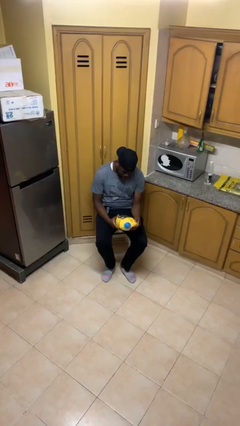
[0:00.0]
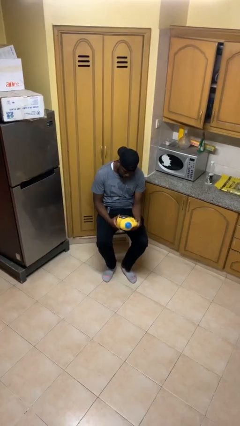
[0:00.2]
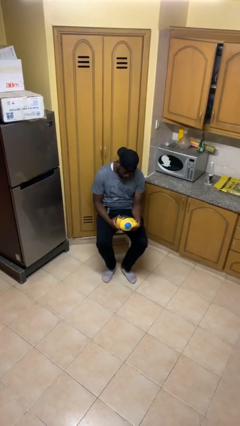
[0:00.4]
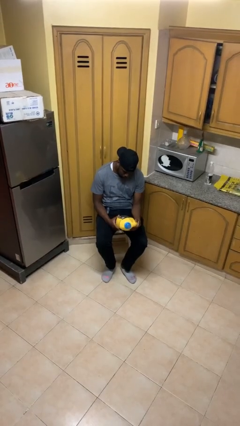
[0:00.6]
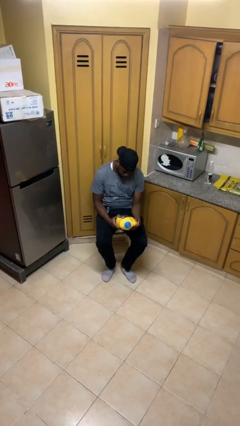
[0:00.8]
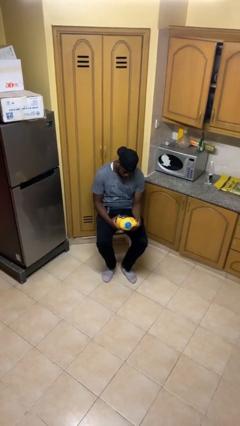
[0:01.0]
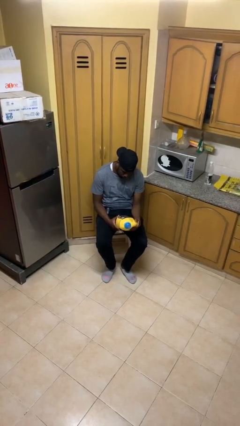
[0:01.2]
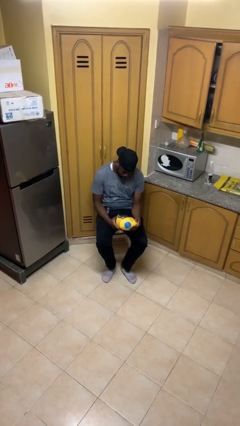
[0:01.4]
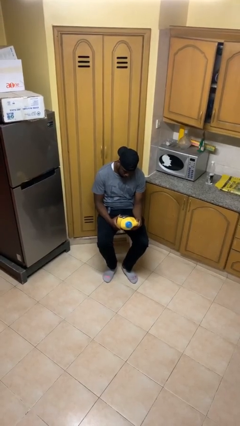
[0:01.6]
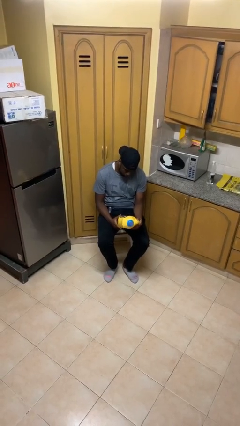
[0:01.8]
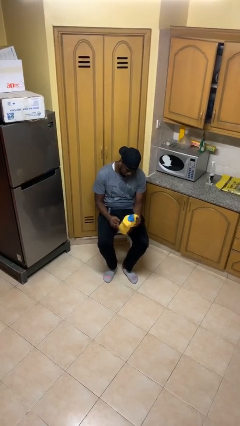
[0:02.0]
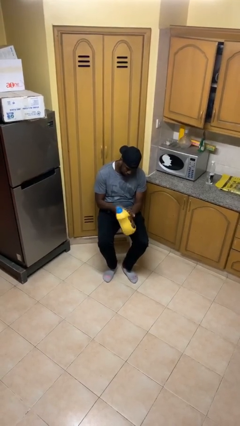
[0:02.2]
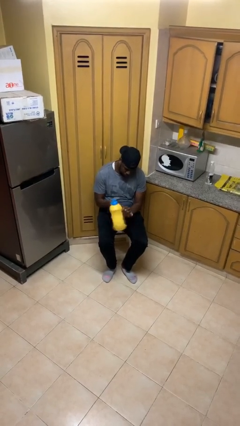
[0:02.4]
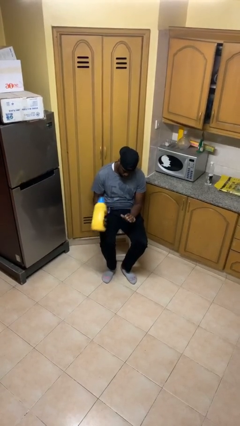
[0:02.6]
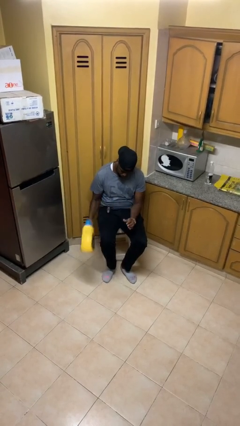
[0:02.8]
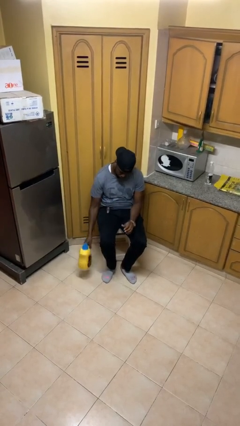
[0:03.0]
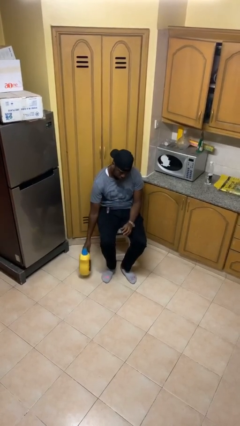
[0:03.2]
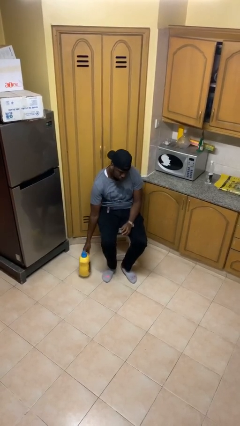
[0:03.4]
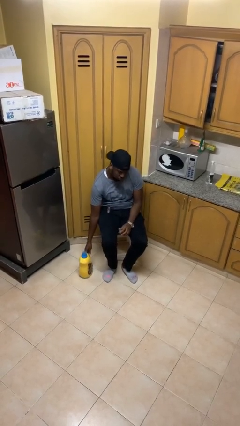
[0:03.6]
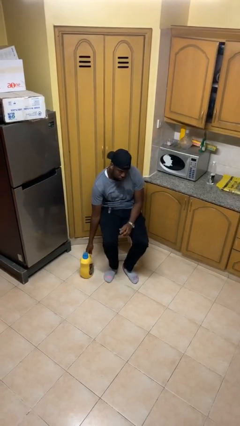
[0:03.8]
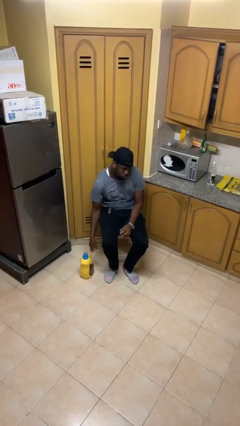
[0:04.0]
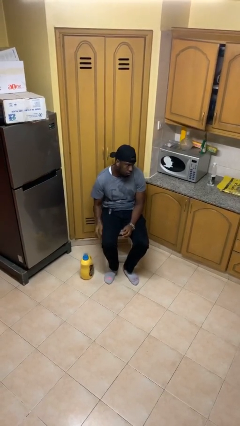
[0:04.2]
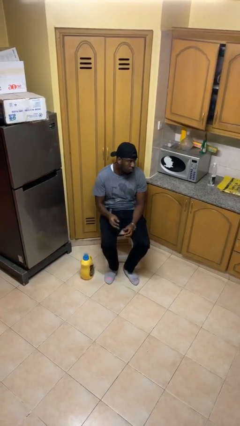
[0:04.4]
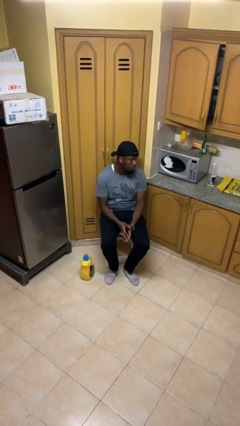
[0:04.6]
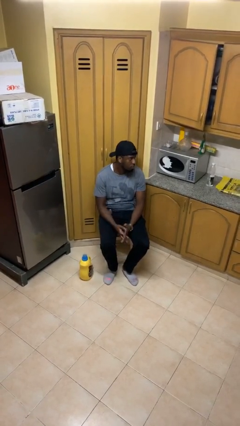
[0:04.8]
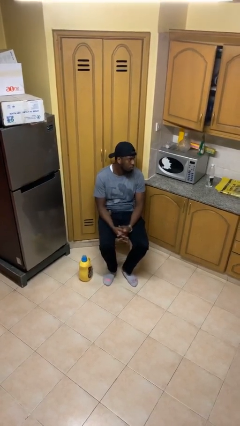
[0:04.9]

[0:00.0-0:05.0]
person puts down object on floor

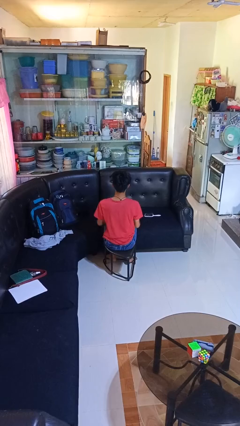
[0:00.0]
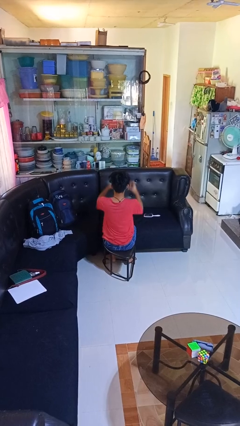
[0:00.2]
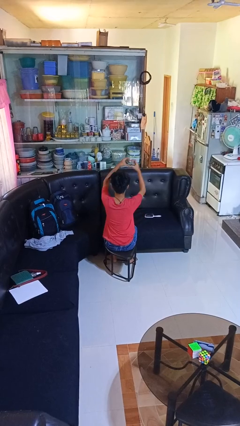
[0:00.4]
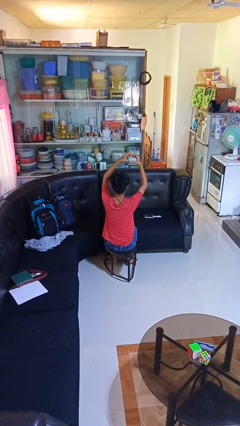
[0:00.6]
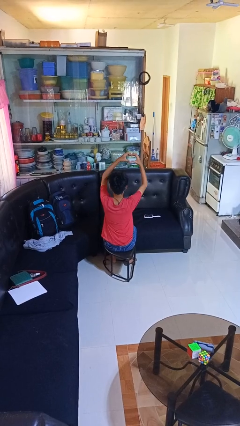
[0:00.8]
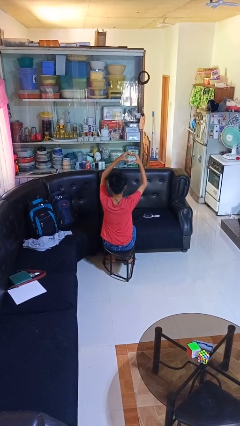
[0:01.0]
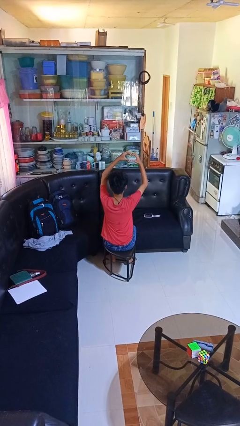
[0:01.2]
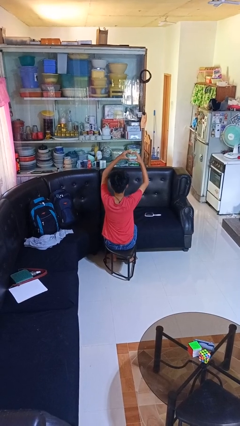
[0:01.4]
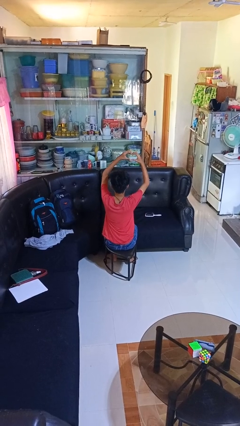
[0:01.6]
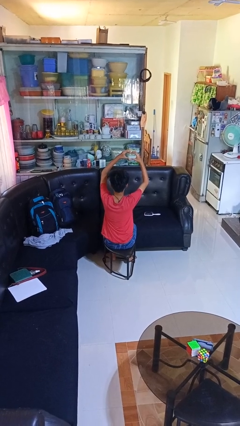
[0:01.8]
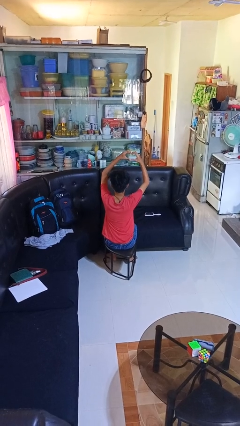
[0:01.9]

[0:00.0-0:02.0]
person gestures heart

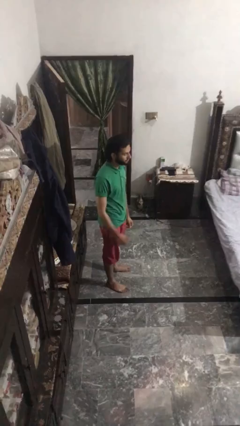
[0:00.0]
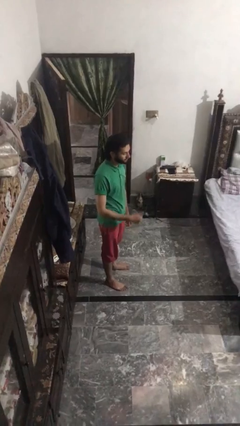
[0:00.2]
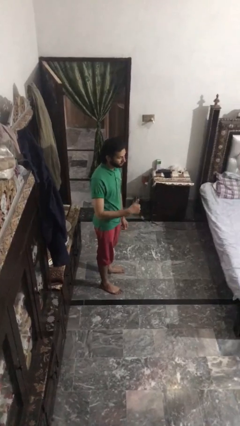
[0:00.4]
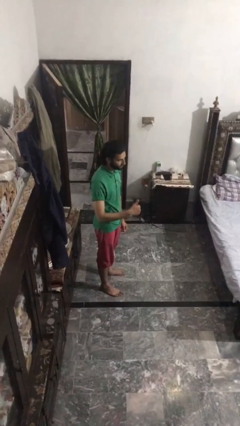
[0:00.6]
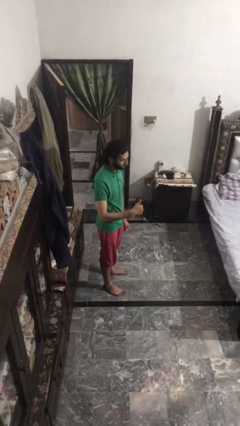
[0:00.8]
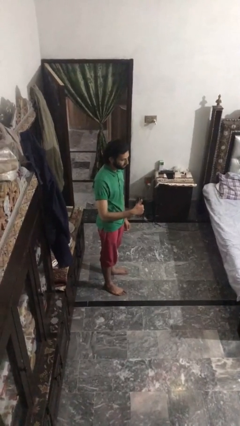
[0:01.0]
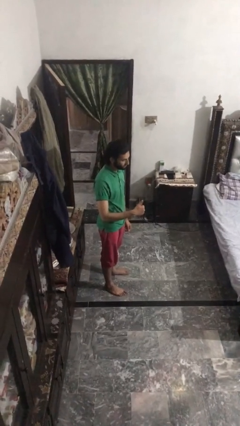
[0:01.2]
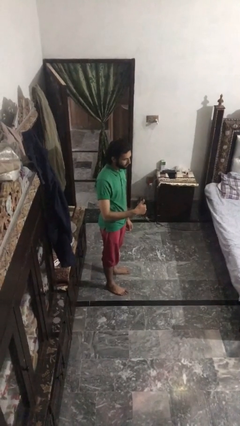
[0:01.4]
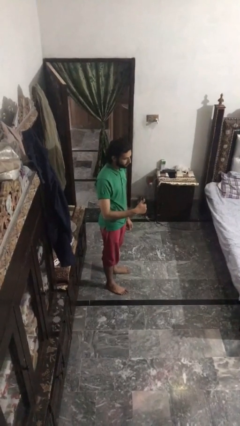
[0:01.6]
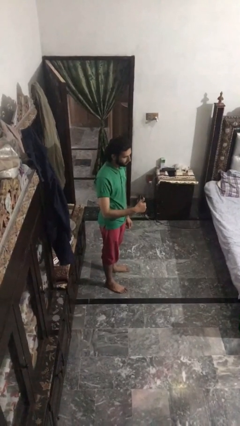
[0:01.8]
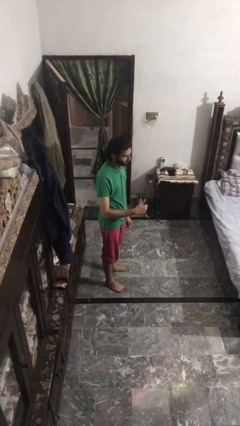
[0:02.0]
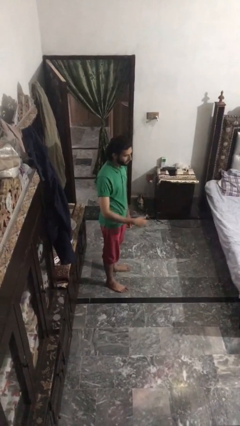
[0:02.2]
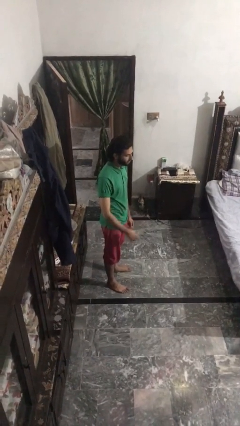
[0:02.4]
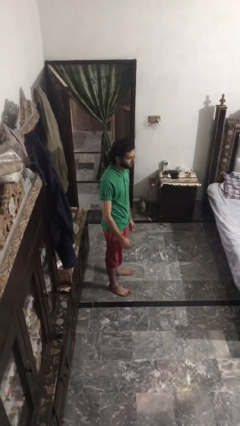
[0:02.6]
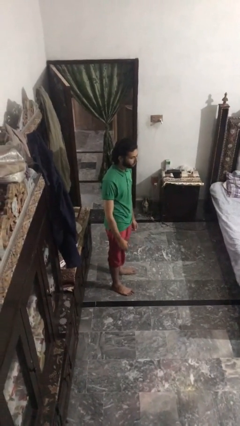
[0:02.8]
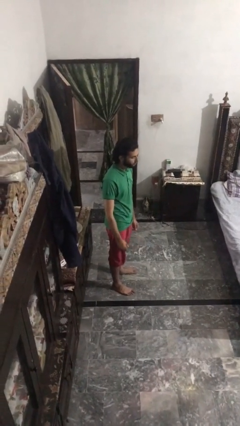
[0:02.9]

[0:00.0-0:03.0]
person gestures thumbs up

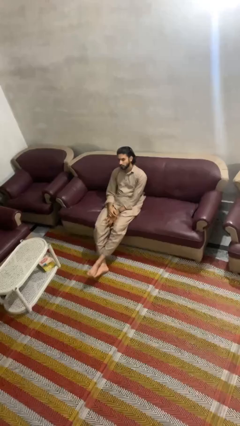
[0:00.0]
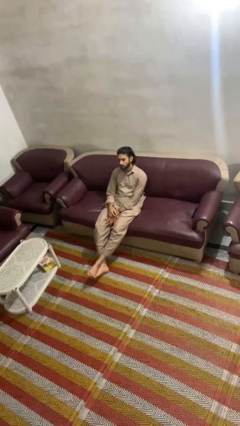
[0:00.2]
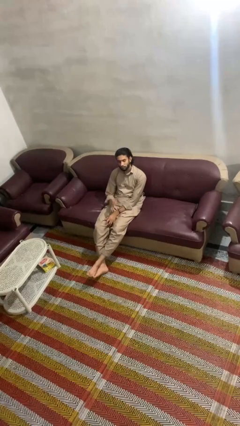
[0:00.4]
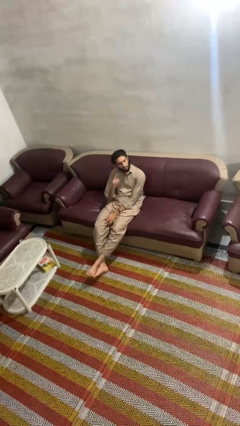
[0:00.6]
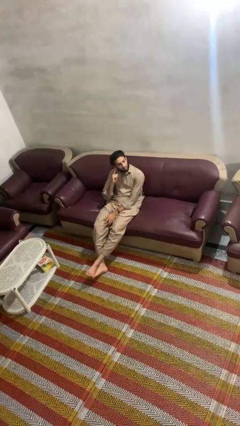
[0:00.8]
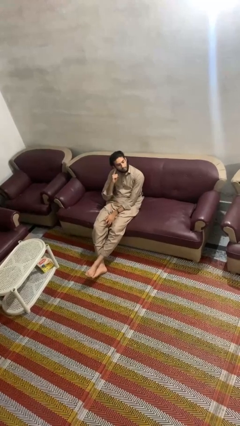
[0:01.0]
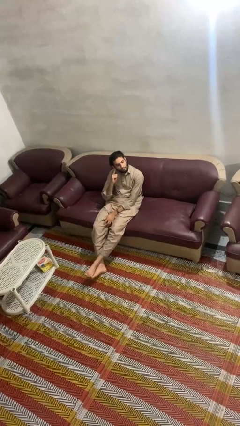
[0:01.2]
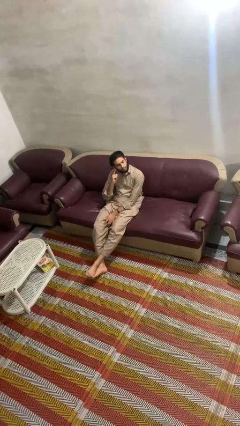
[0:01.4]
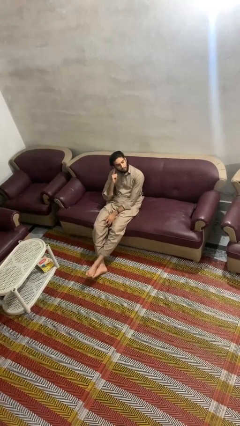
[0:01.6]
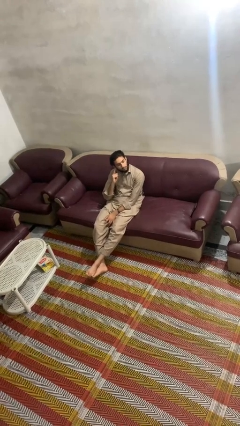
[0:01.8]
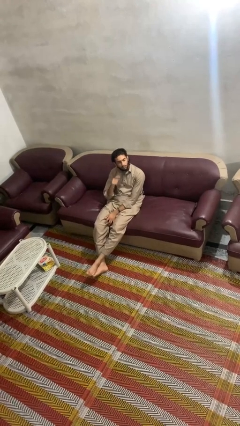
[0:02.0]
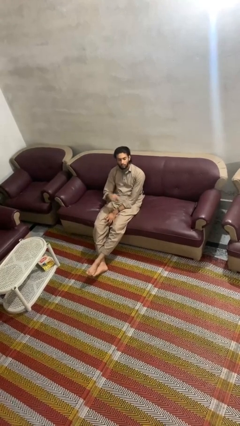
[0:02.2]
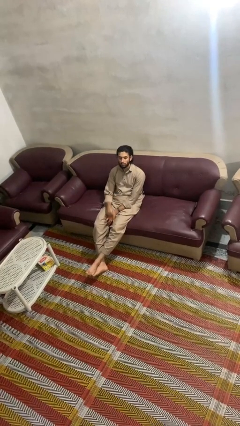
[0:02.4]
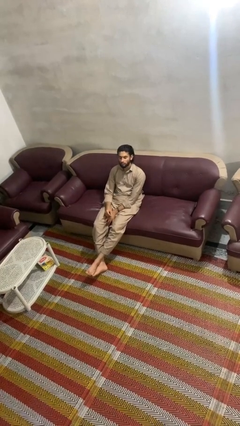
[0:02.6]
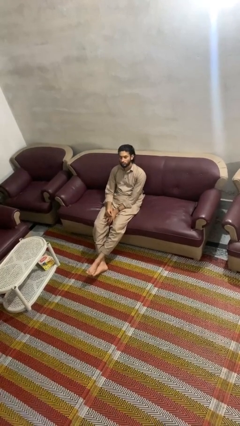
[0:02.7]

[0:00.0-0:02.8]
person gestures listen closely

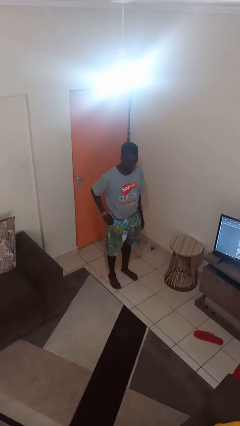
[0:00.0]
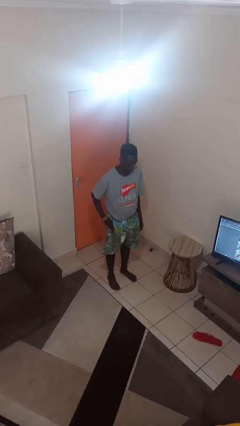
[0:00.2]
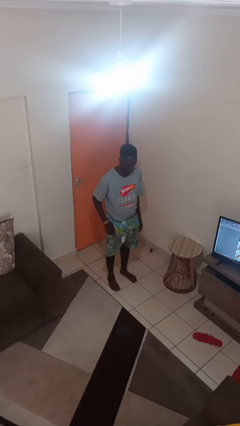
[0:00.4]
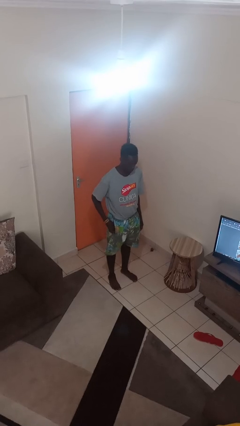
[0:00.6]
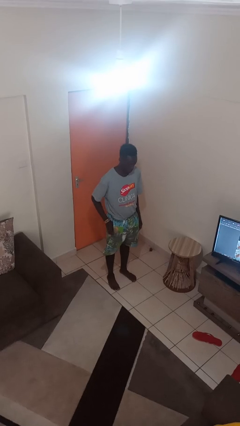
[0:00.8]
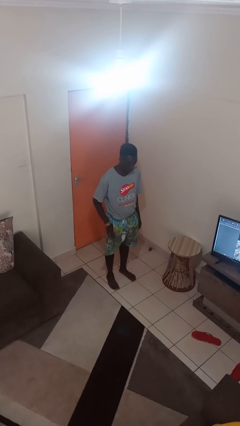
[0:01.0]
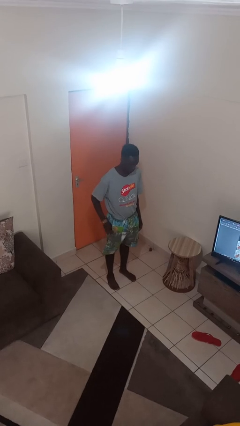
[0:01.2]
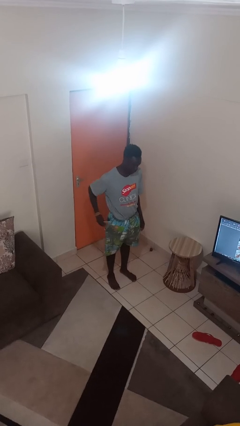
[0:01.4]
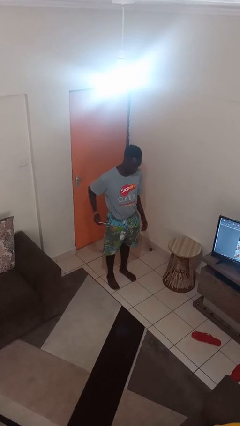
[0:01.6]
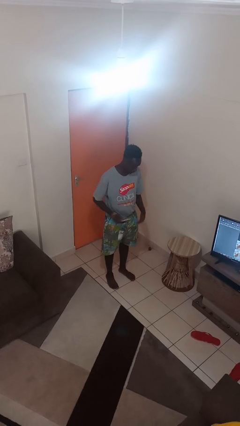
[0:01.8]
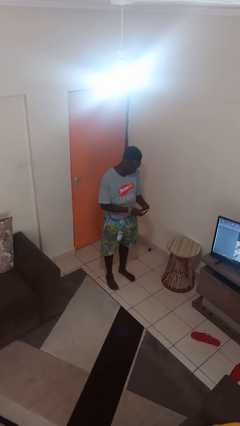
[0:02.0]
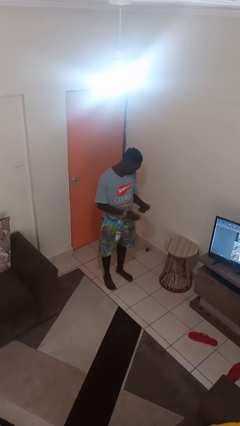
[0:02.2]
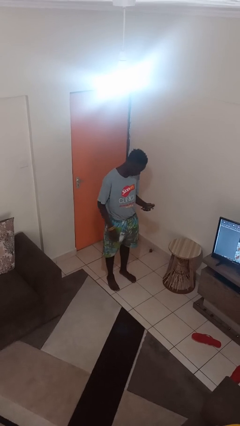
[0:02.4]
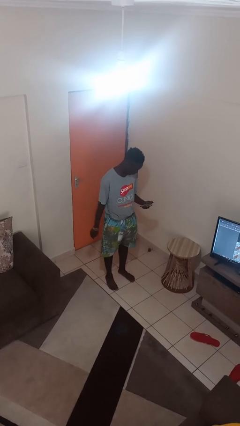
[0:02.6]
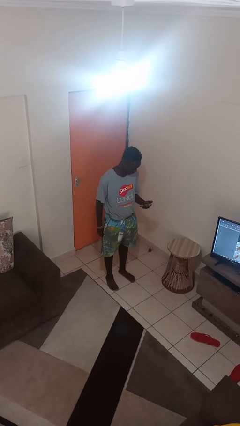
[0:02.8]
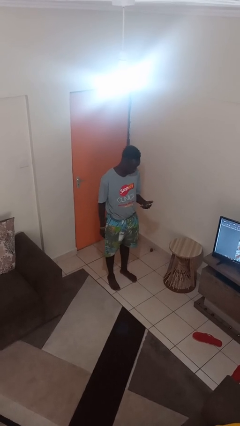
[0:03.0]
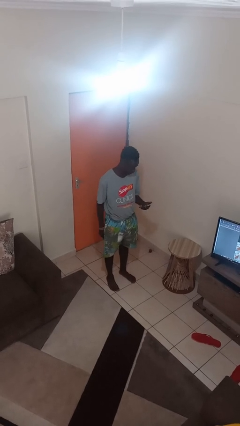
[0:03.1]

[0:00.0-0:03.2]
person takes phone from pocket

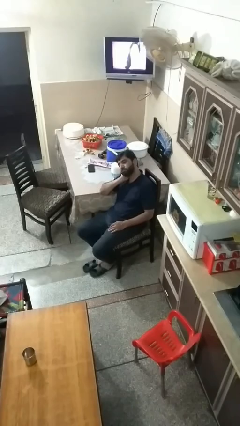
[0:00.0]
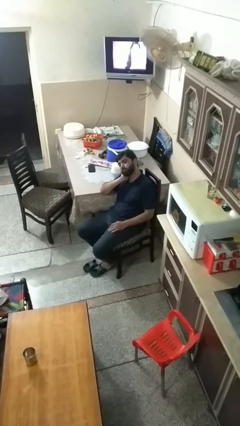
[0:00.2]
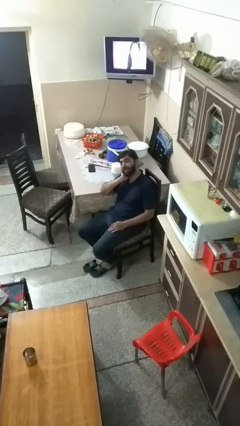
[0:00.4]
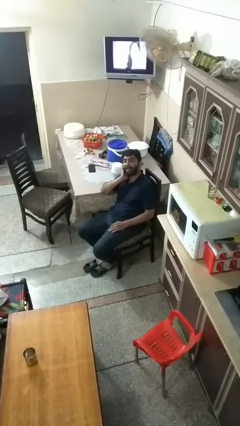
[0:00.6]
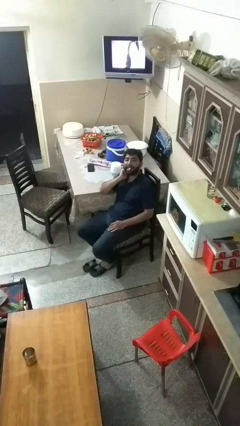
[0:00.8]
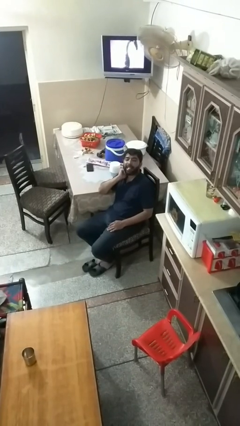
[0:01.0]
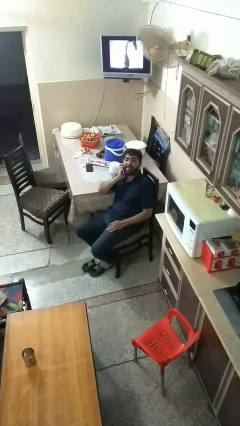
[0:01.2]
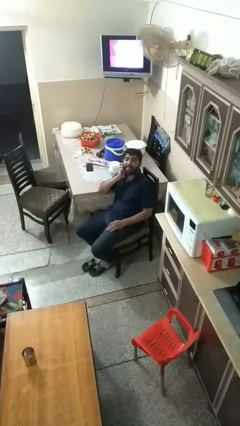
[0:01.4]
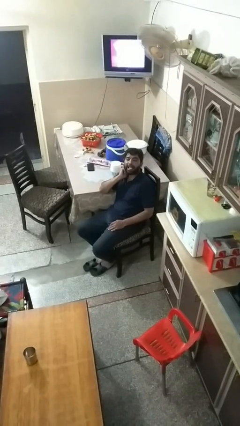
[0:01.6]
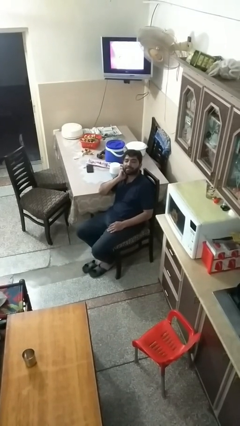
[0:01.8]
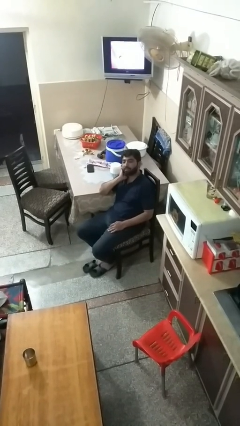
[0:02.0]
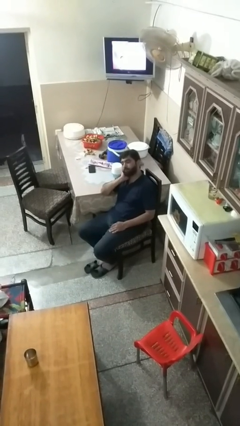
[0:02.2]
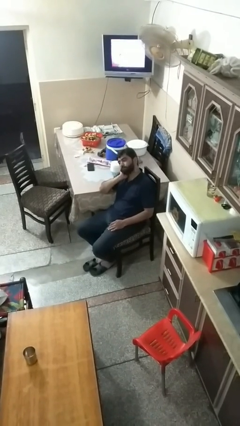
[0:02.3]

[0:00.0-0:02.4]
person sticks out tongue
